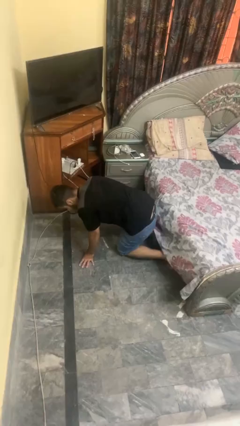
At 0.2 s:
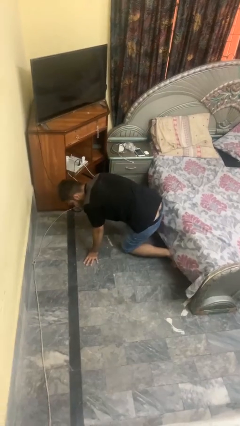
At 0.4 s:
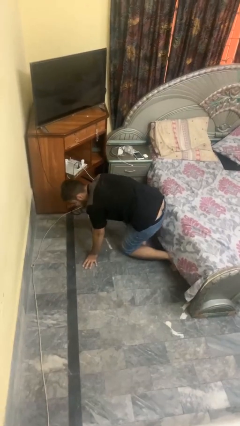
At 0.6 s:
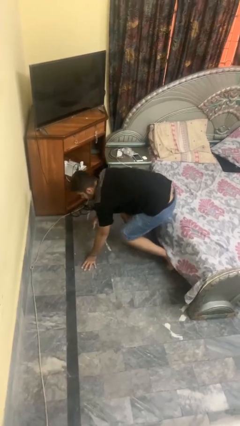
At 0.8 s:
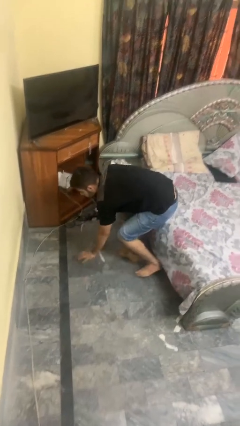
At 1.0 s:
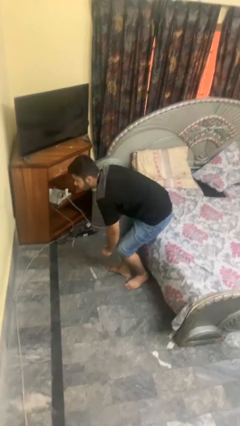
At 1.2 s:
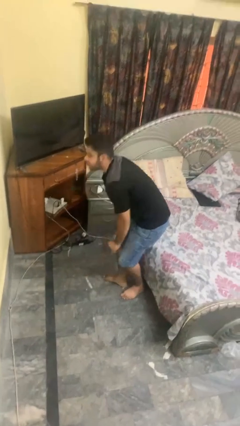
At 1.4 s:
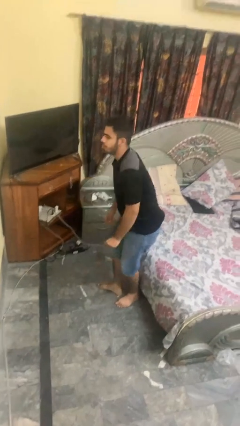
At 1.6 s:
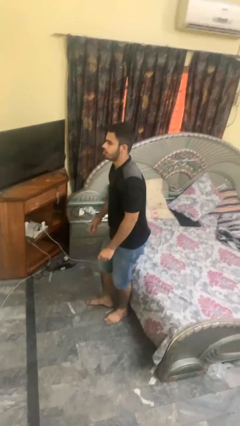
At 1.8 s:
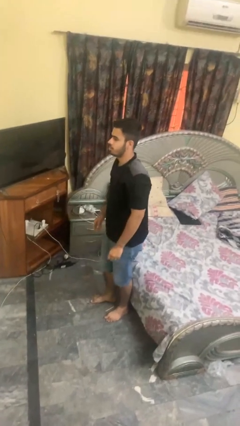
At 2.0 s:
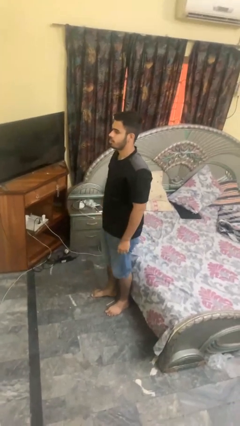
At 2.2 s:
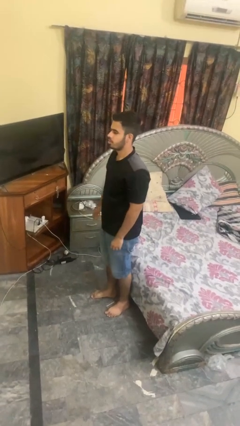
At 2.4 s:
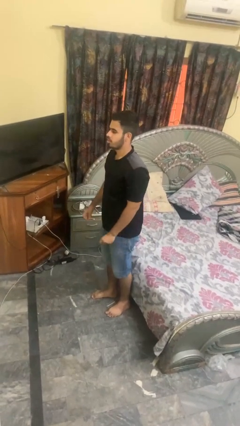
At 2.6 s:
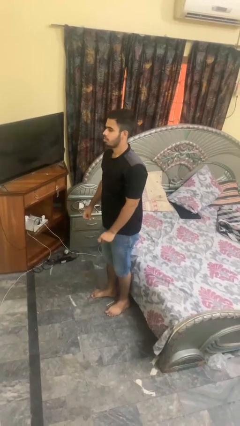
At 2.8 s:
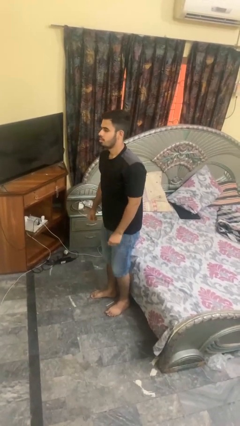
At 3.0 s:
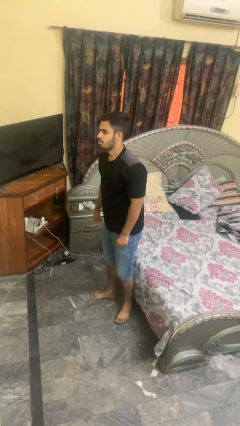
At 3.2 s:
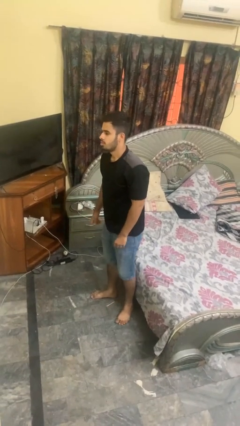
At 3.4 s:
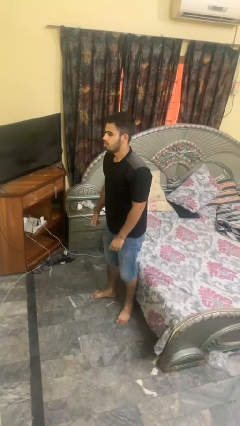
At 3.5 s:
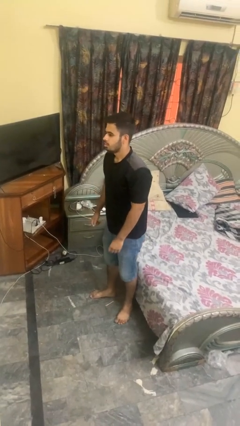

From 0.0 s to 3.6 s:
person stands up from floor

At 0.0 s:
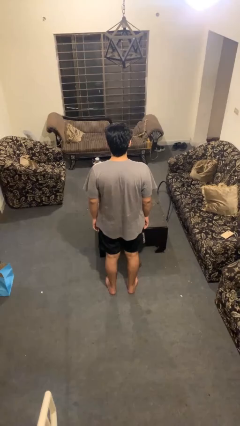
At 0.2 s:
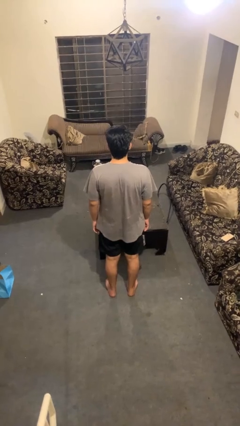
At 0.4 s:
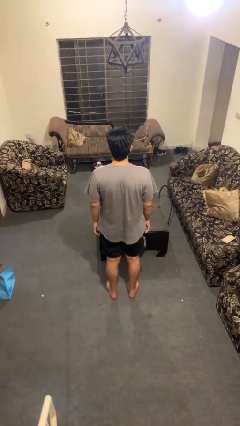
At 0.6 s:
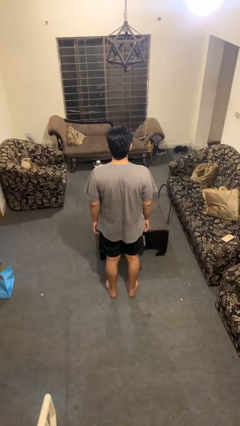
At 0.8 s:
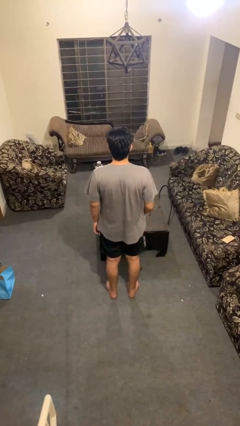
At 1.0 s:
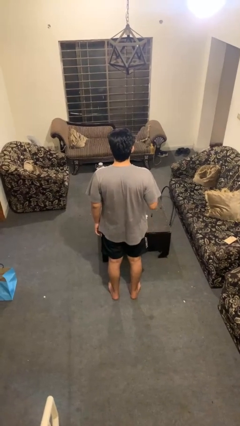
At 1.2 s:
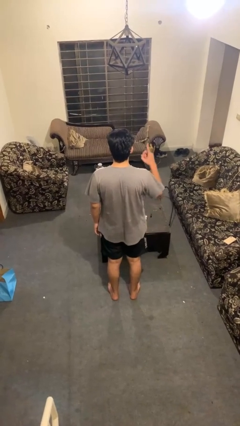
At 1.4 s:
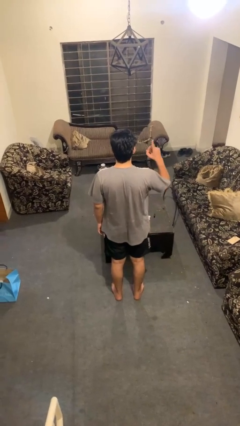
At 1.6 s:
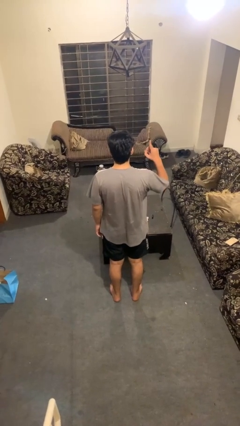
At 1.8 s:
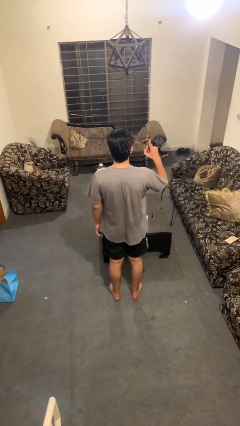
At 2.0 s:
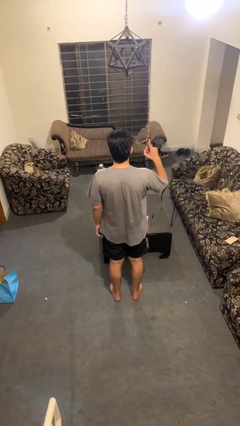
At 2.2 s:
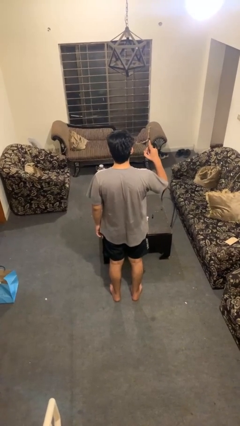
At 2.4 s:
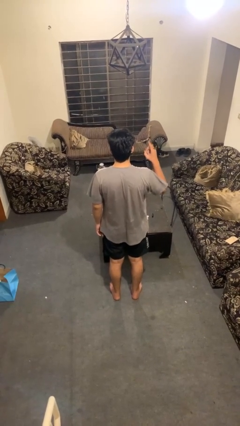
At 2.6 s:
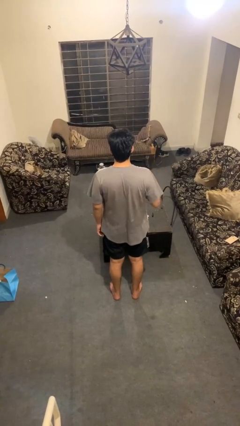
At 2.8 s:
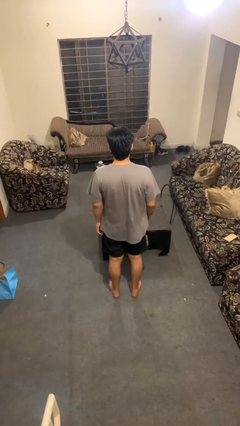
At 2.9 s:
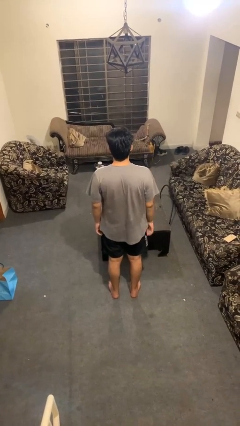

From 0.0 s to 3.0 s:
person gestures number one

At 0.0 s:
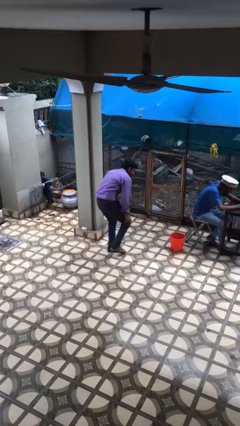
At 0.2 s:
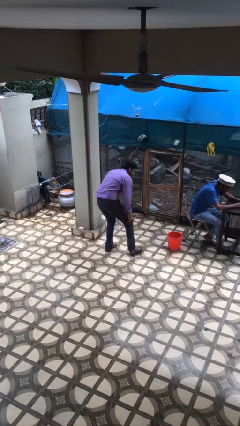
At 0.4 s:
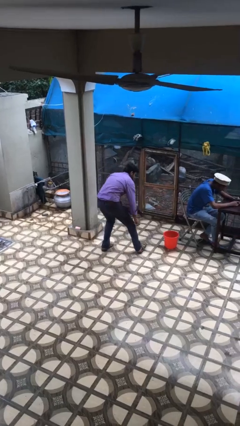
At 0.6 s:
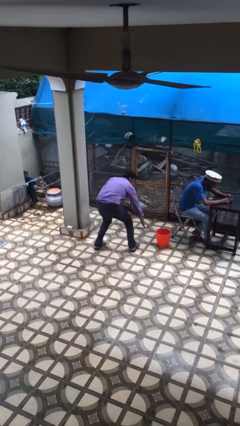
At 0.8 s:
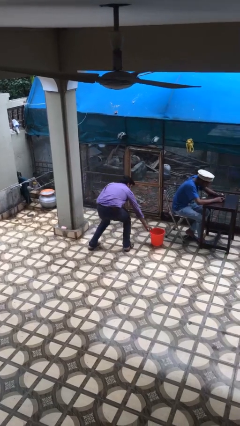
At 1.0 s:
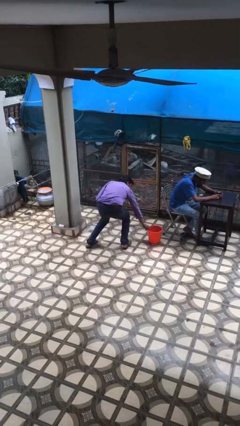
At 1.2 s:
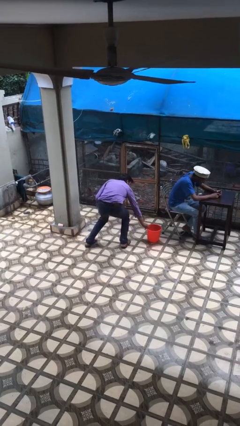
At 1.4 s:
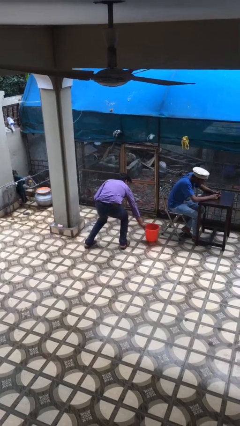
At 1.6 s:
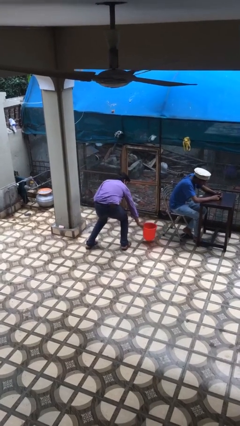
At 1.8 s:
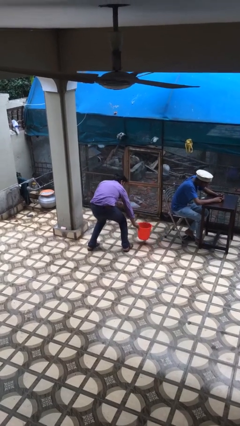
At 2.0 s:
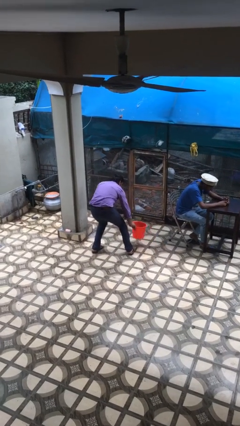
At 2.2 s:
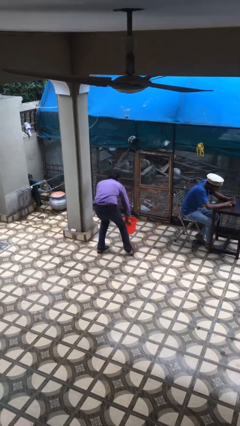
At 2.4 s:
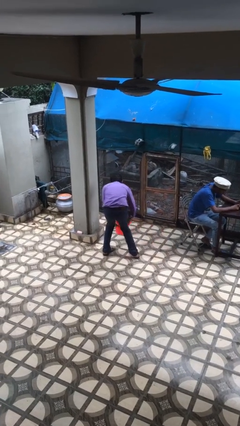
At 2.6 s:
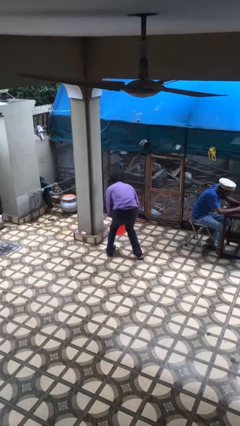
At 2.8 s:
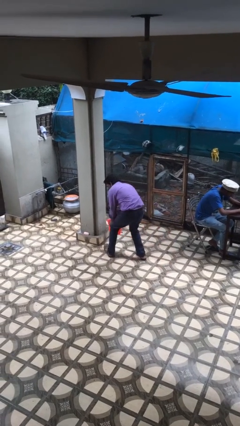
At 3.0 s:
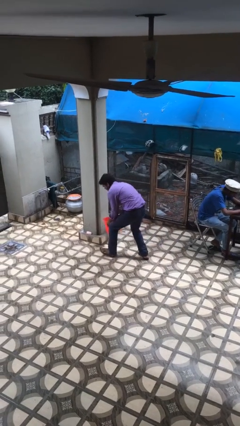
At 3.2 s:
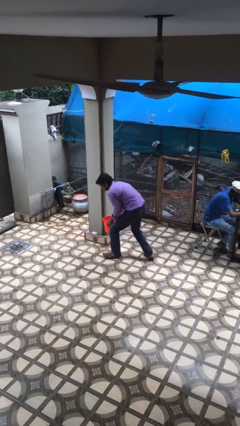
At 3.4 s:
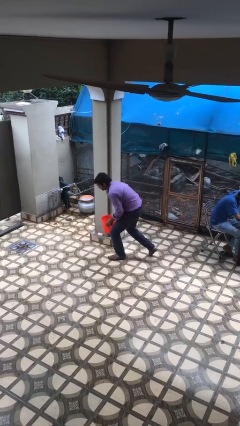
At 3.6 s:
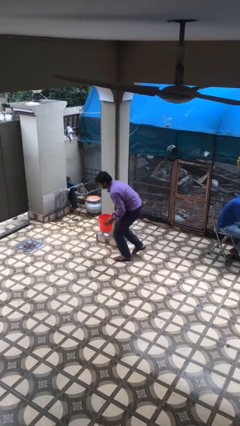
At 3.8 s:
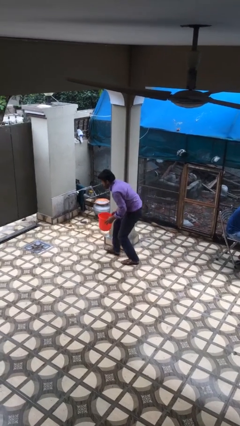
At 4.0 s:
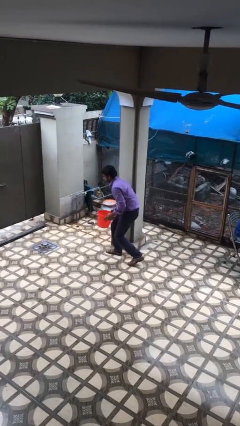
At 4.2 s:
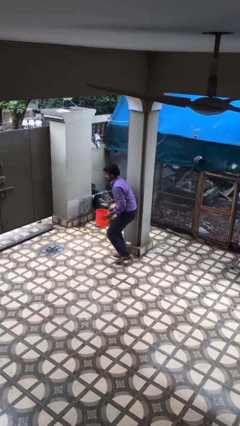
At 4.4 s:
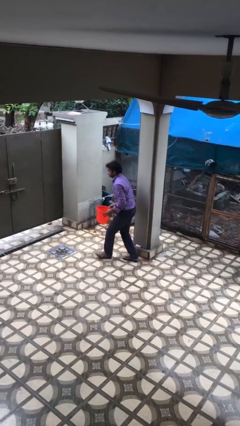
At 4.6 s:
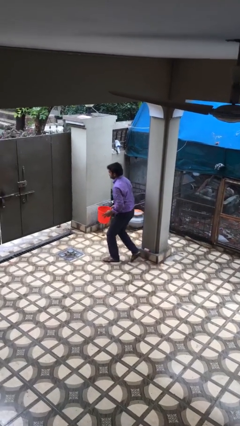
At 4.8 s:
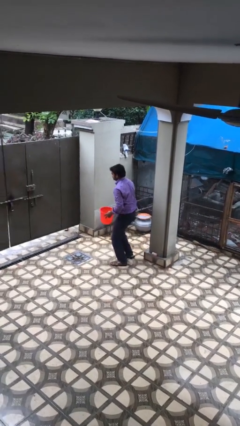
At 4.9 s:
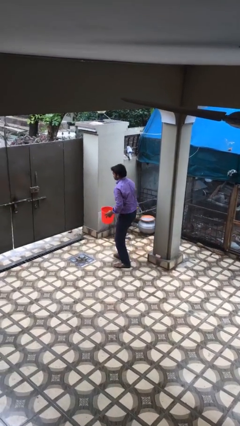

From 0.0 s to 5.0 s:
person steals object from person

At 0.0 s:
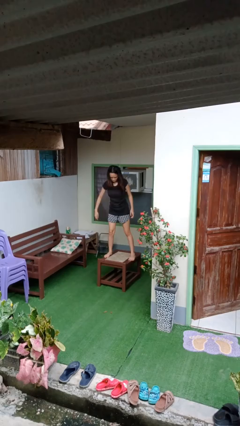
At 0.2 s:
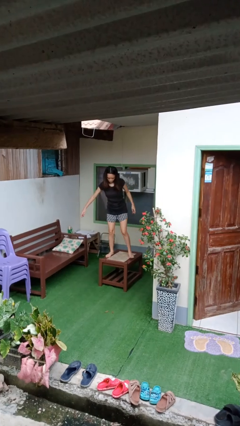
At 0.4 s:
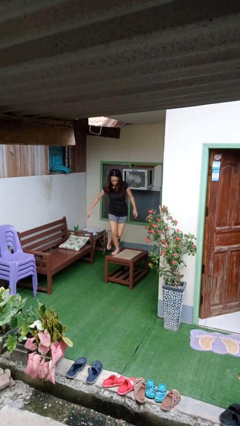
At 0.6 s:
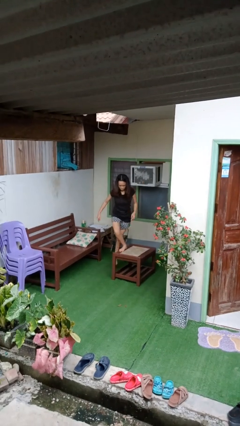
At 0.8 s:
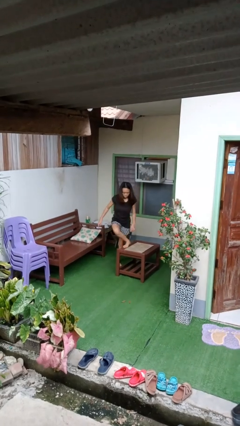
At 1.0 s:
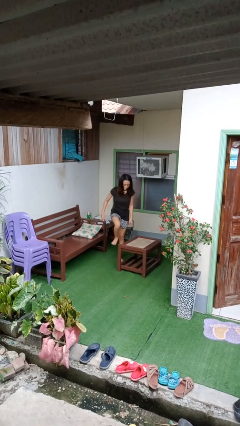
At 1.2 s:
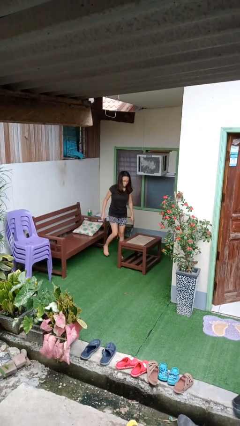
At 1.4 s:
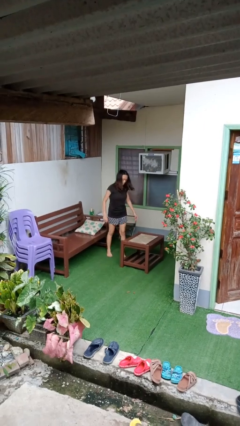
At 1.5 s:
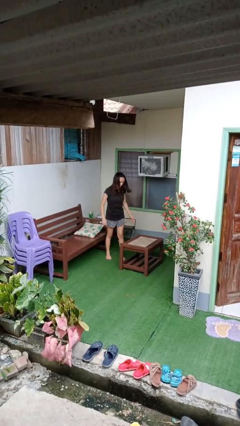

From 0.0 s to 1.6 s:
person climbs off table

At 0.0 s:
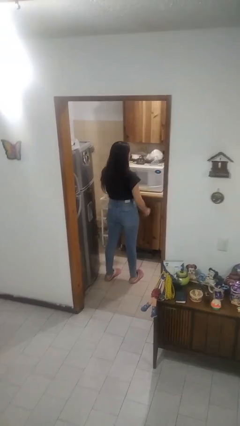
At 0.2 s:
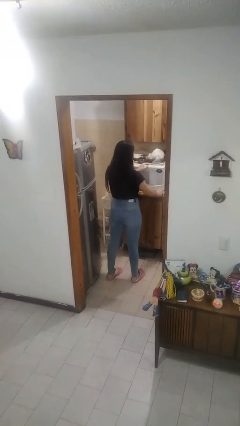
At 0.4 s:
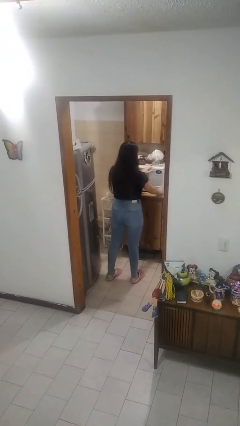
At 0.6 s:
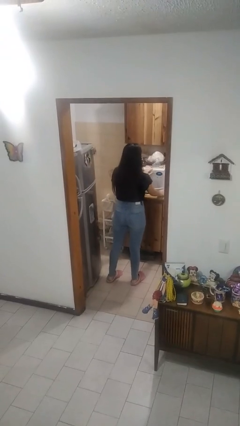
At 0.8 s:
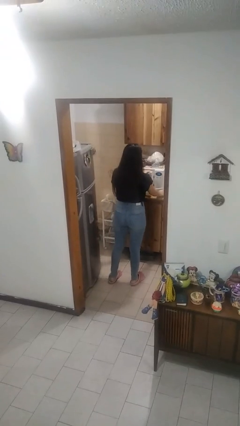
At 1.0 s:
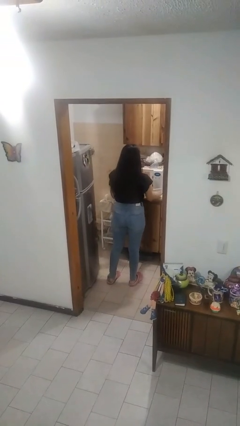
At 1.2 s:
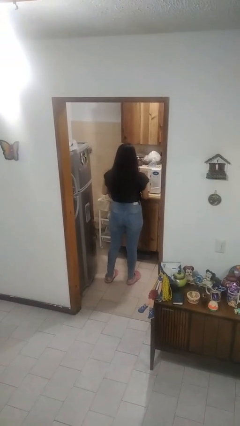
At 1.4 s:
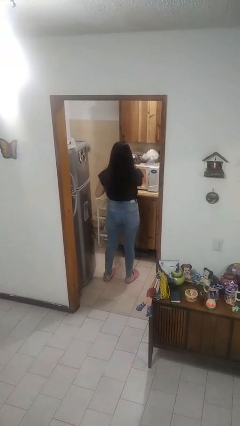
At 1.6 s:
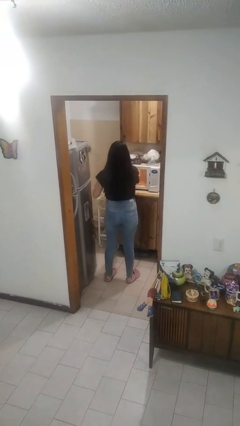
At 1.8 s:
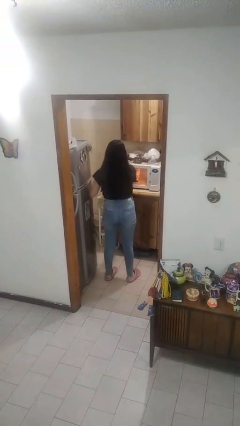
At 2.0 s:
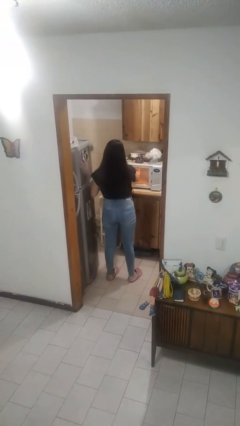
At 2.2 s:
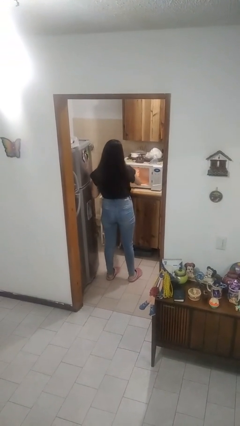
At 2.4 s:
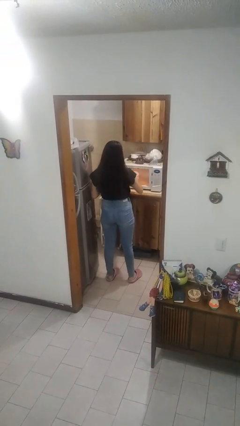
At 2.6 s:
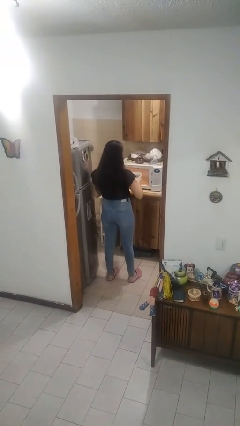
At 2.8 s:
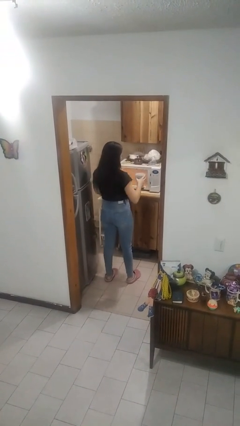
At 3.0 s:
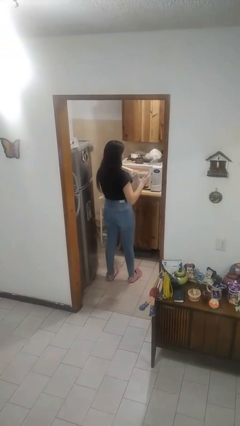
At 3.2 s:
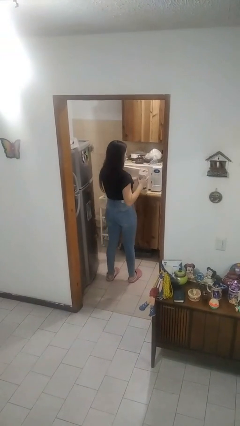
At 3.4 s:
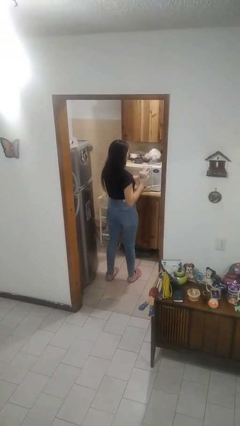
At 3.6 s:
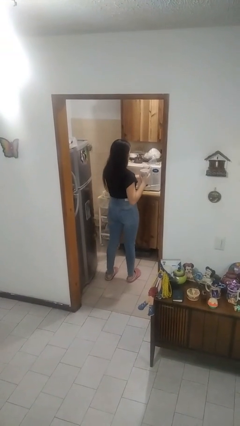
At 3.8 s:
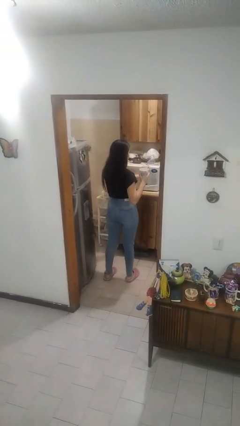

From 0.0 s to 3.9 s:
person takes object from microwave

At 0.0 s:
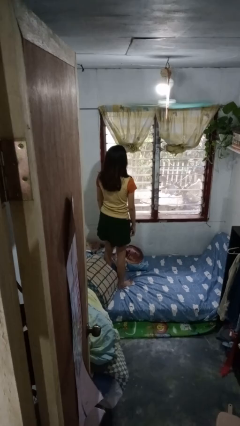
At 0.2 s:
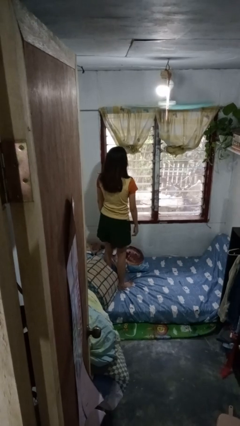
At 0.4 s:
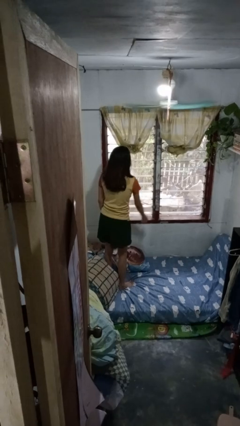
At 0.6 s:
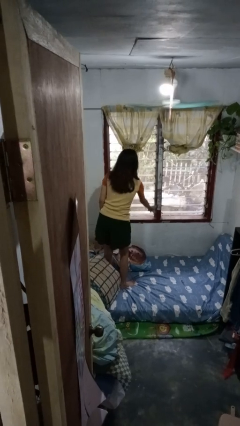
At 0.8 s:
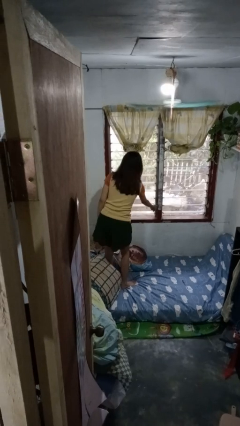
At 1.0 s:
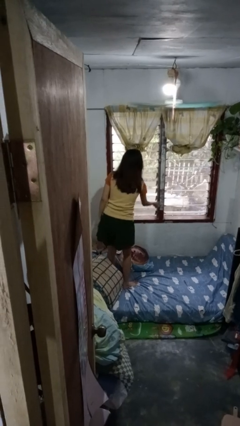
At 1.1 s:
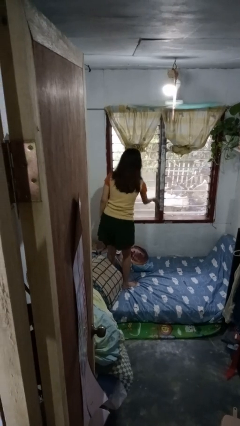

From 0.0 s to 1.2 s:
person closes home window
